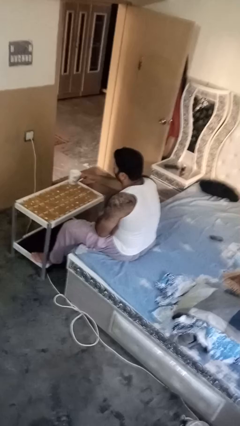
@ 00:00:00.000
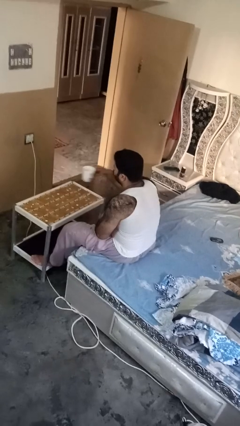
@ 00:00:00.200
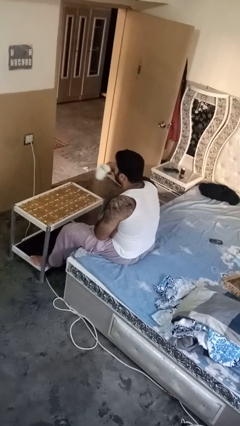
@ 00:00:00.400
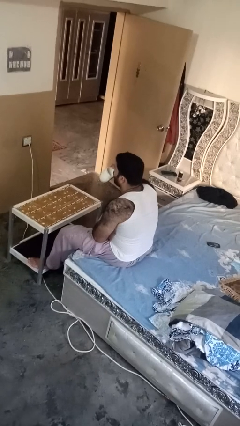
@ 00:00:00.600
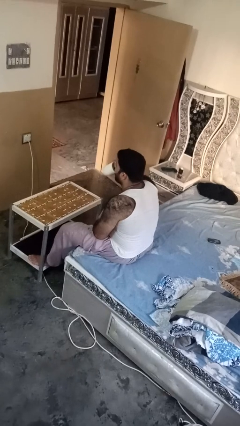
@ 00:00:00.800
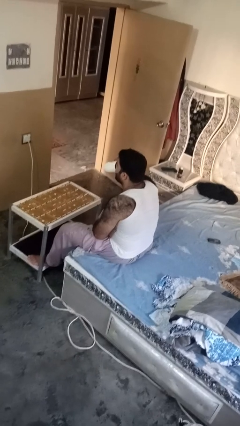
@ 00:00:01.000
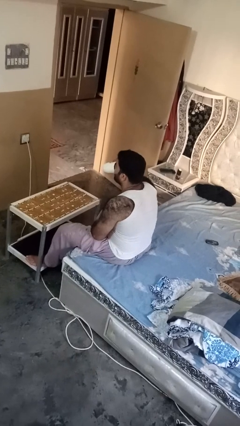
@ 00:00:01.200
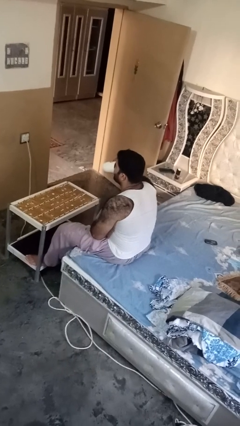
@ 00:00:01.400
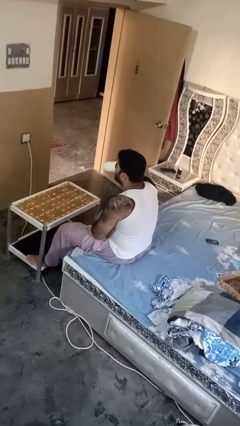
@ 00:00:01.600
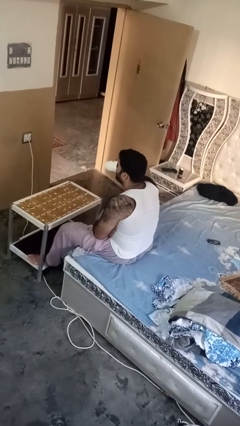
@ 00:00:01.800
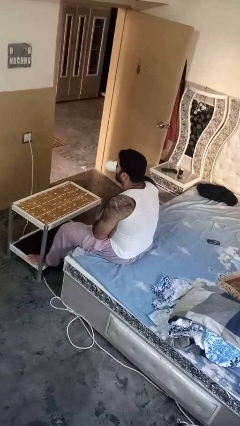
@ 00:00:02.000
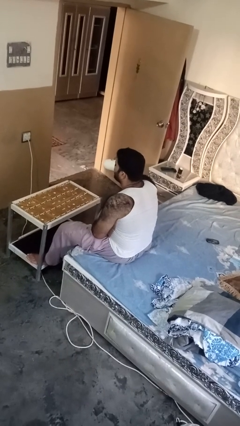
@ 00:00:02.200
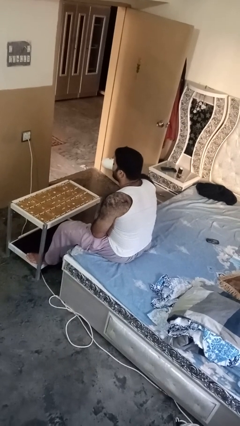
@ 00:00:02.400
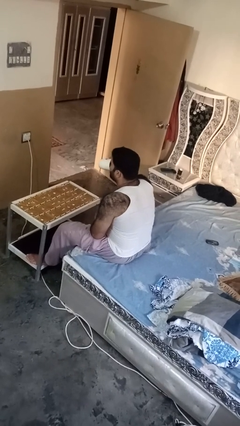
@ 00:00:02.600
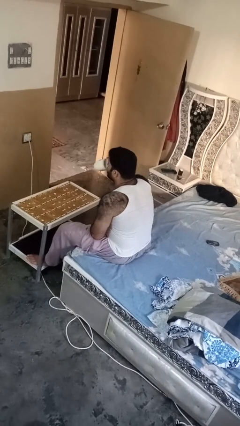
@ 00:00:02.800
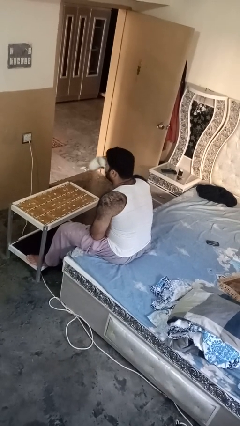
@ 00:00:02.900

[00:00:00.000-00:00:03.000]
person drinks from mug

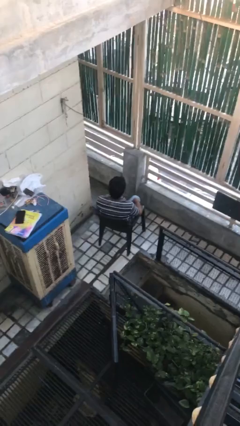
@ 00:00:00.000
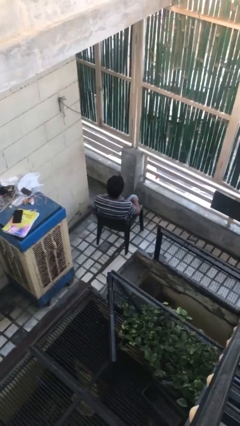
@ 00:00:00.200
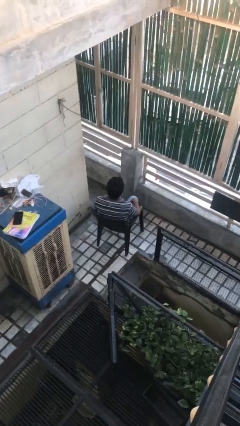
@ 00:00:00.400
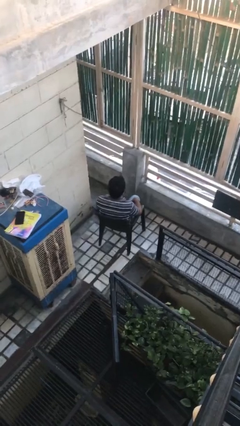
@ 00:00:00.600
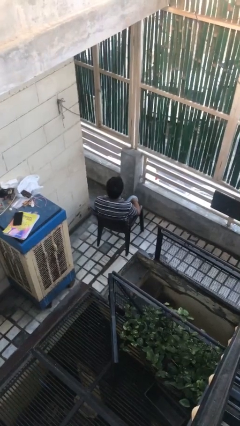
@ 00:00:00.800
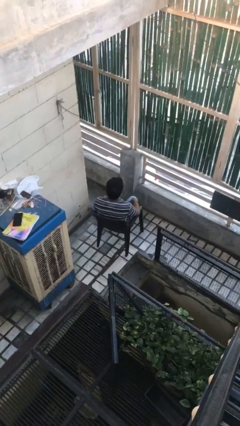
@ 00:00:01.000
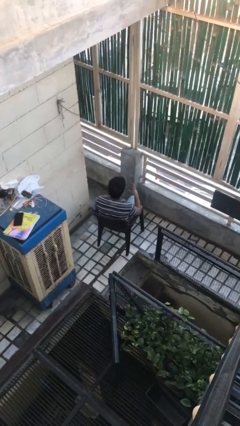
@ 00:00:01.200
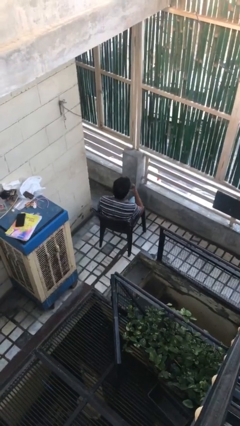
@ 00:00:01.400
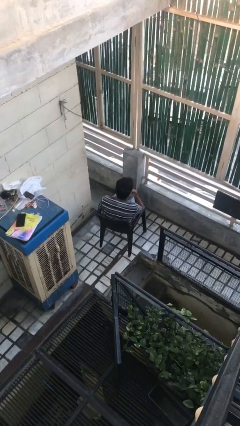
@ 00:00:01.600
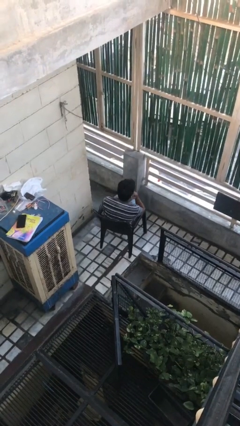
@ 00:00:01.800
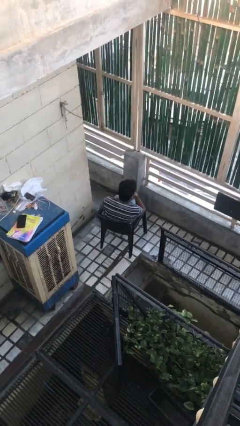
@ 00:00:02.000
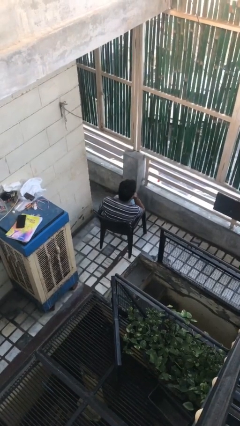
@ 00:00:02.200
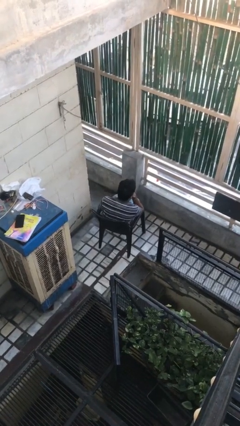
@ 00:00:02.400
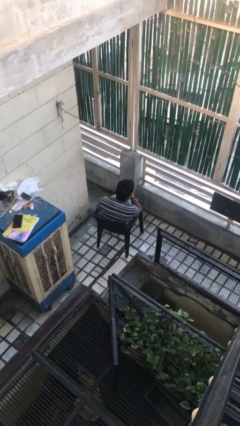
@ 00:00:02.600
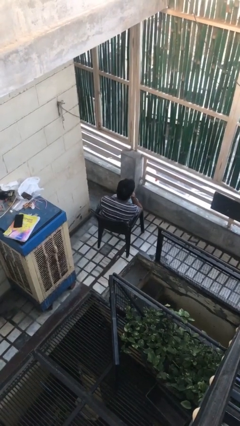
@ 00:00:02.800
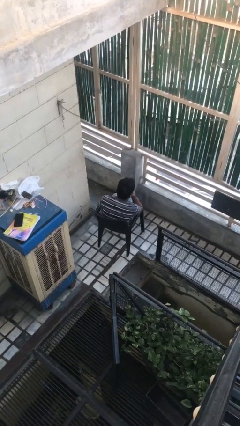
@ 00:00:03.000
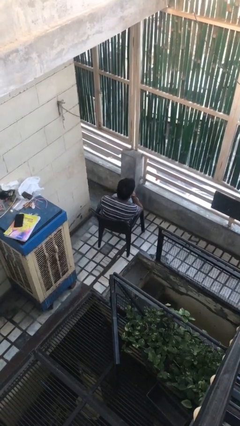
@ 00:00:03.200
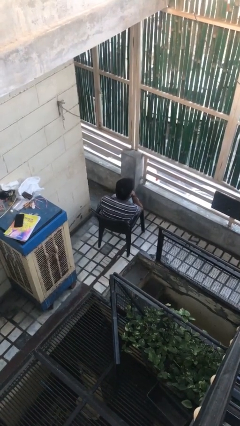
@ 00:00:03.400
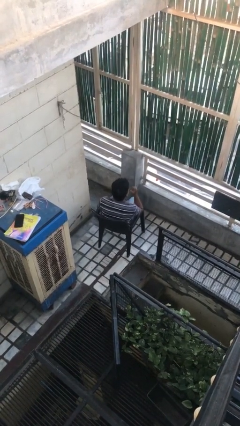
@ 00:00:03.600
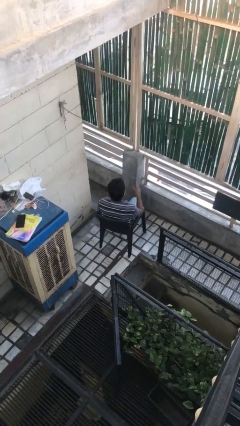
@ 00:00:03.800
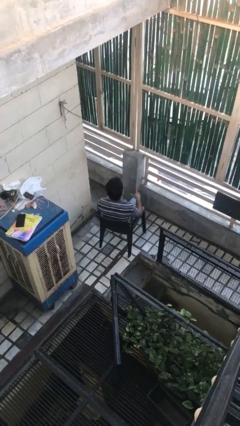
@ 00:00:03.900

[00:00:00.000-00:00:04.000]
person strokes chin

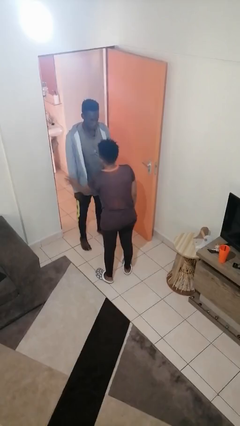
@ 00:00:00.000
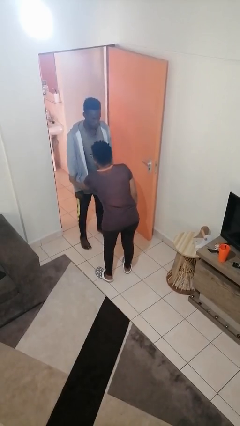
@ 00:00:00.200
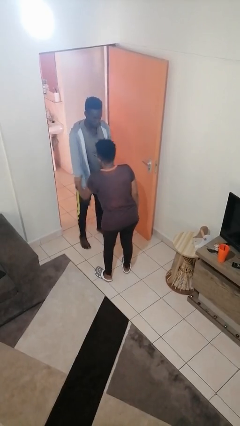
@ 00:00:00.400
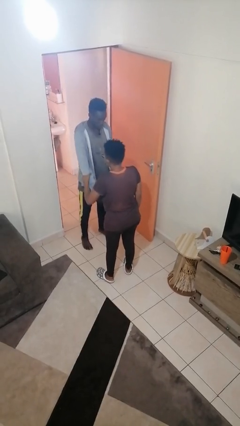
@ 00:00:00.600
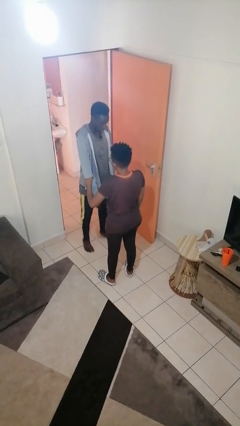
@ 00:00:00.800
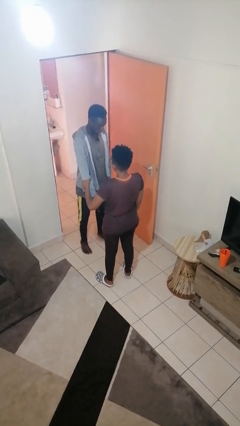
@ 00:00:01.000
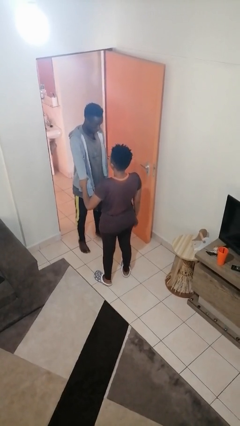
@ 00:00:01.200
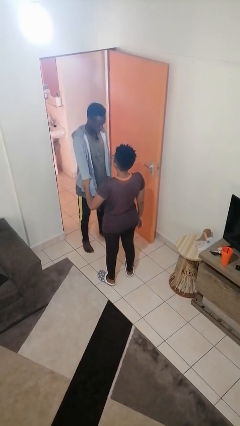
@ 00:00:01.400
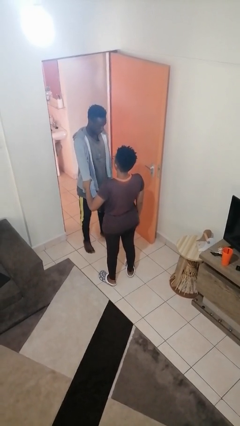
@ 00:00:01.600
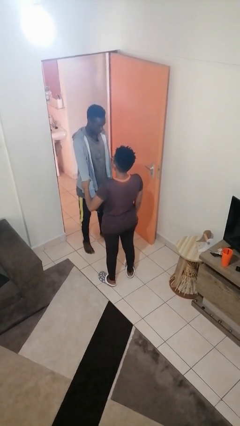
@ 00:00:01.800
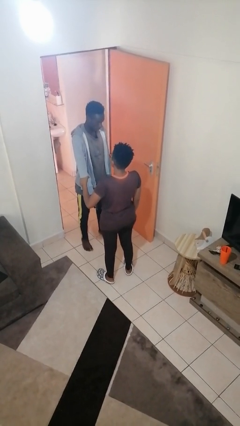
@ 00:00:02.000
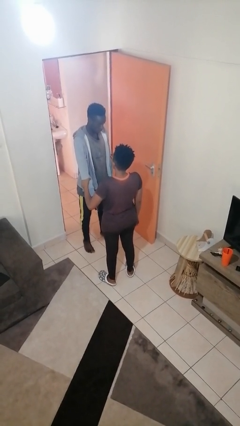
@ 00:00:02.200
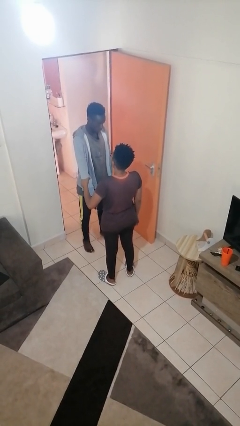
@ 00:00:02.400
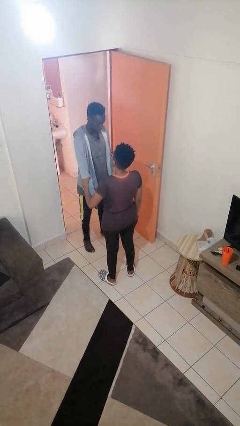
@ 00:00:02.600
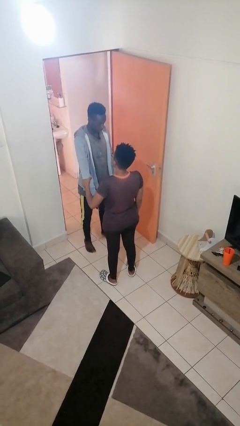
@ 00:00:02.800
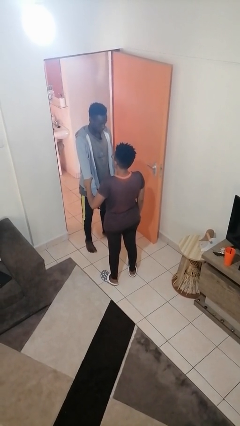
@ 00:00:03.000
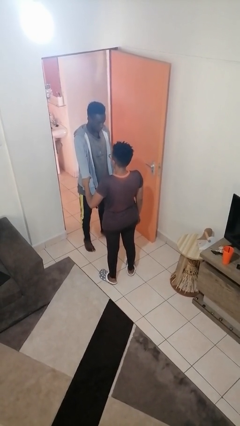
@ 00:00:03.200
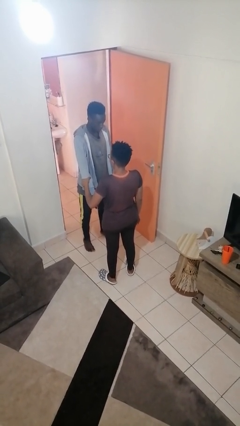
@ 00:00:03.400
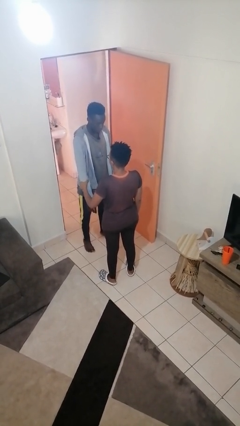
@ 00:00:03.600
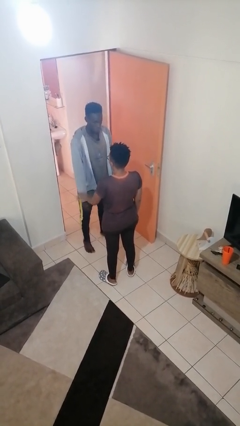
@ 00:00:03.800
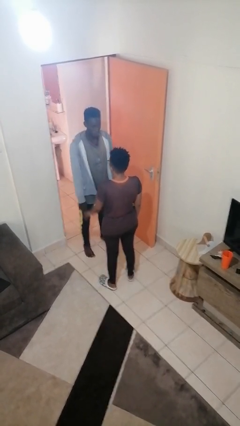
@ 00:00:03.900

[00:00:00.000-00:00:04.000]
person grabs person by forearm

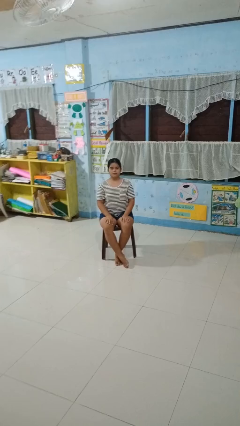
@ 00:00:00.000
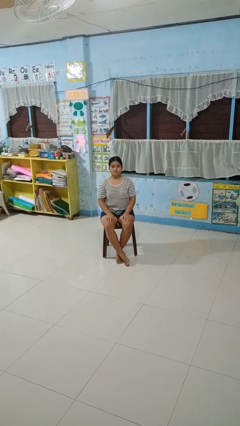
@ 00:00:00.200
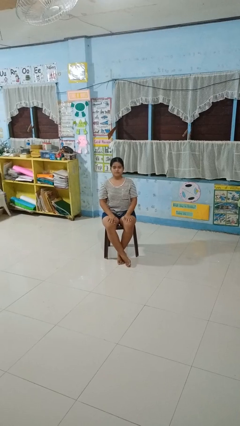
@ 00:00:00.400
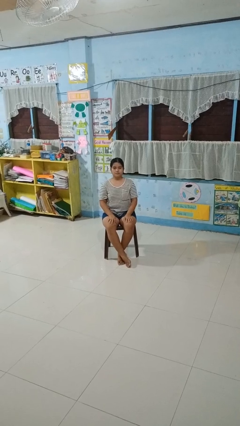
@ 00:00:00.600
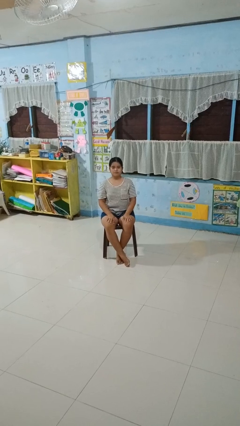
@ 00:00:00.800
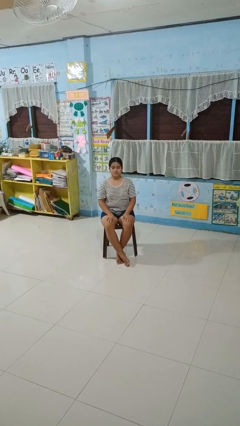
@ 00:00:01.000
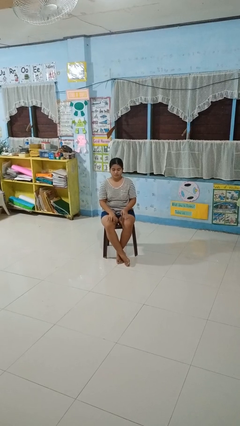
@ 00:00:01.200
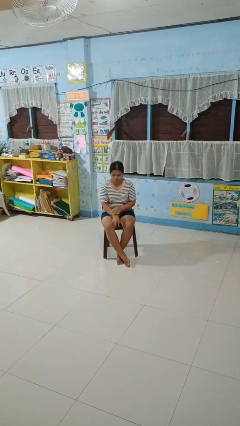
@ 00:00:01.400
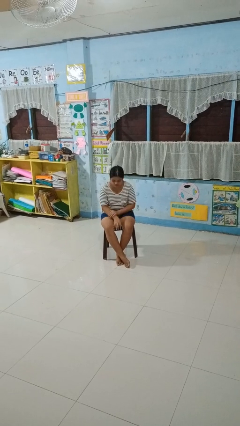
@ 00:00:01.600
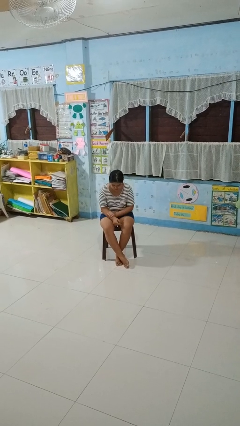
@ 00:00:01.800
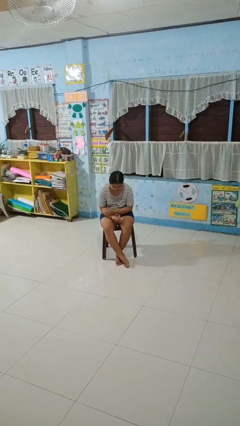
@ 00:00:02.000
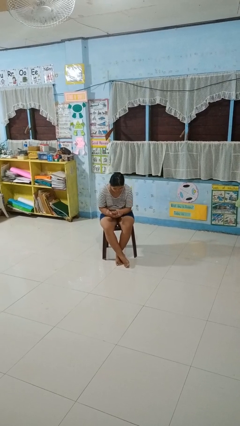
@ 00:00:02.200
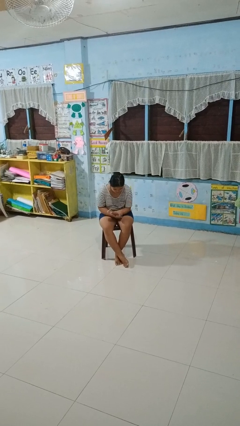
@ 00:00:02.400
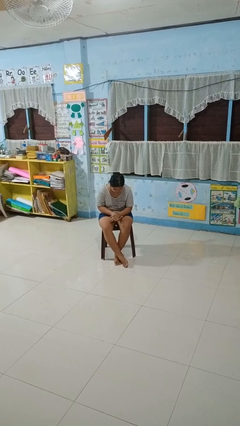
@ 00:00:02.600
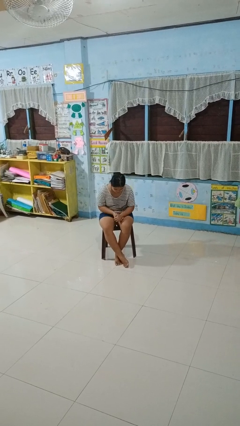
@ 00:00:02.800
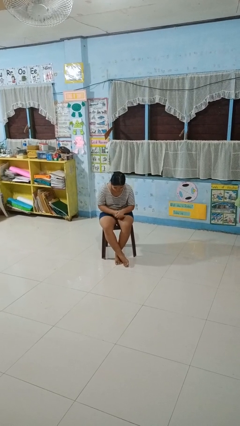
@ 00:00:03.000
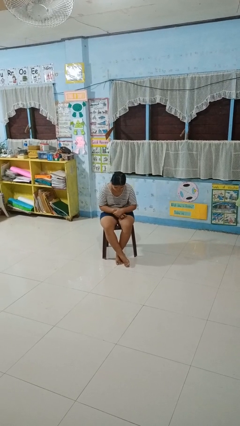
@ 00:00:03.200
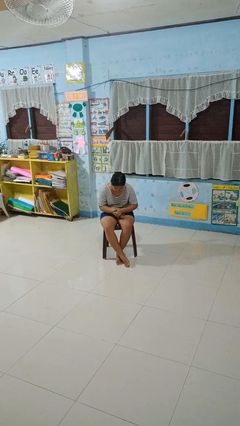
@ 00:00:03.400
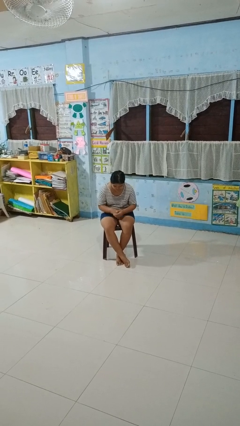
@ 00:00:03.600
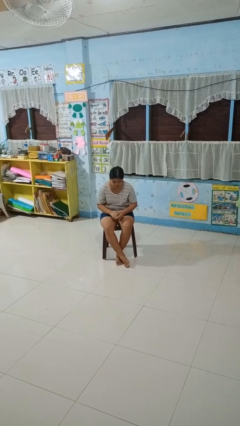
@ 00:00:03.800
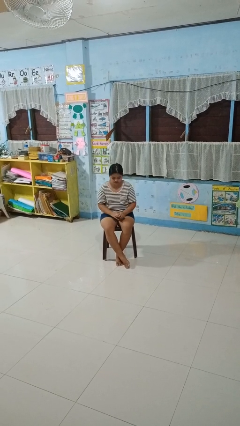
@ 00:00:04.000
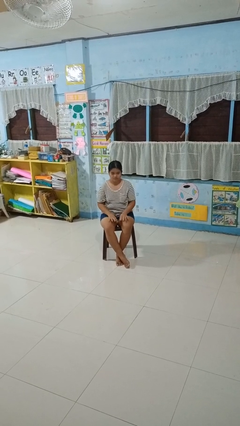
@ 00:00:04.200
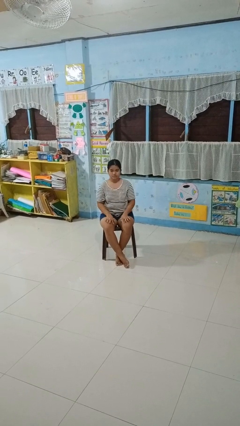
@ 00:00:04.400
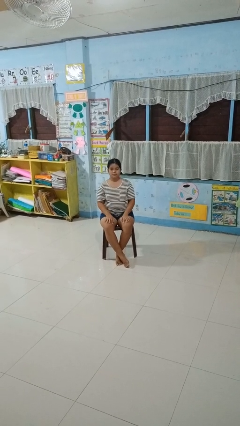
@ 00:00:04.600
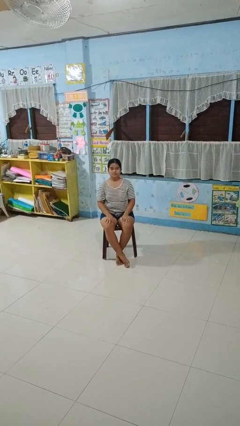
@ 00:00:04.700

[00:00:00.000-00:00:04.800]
person looks at hands in lap

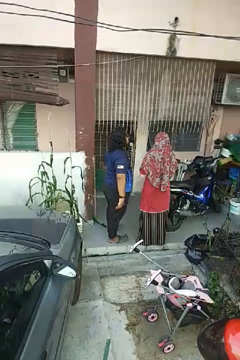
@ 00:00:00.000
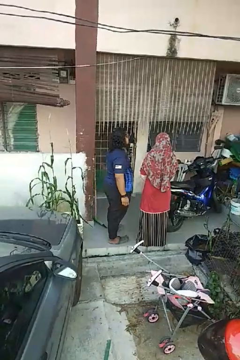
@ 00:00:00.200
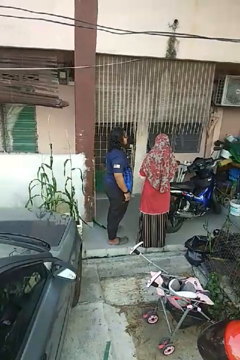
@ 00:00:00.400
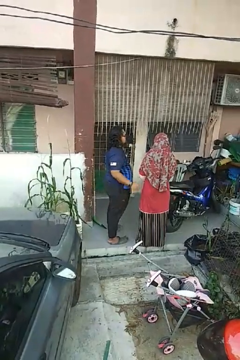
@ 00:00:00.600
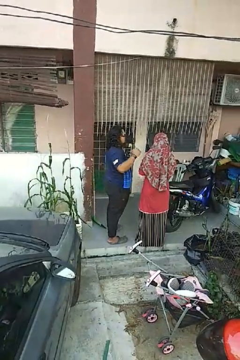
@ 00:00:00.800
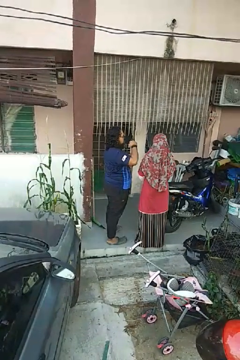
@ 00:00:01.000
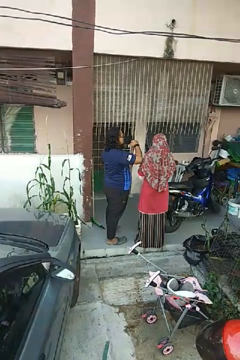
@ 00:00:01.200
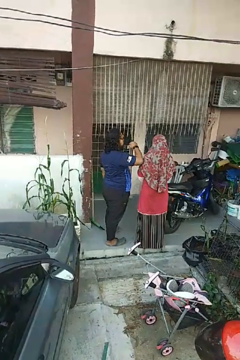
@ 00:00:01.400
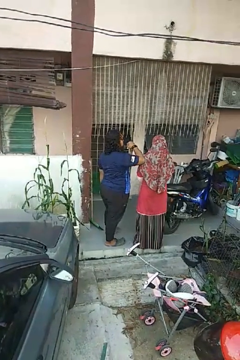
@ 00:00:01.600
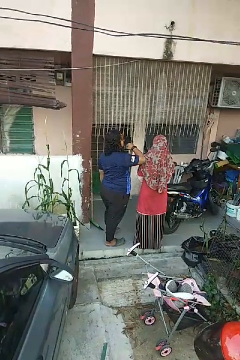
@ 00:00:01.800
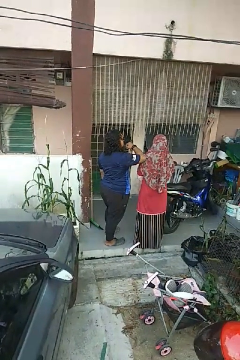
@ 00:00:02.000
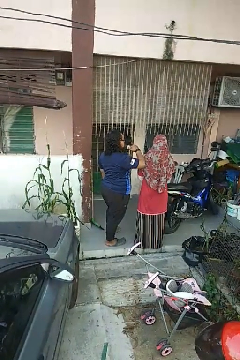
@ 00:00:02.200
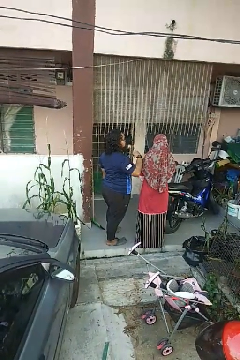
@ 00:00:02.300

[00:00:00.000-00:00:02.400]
person nudges person with elbow
